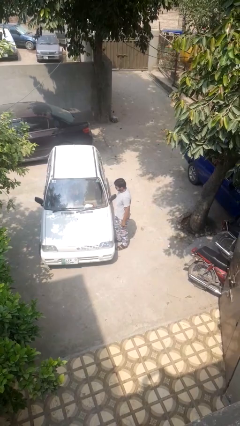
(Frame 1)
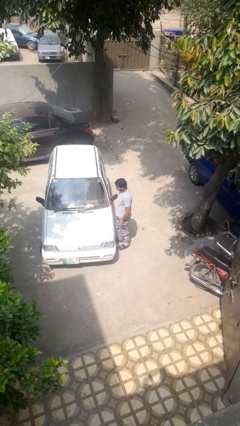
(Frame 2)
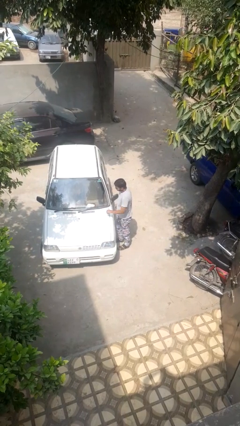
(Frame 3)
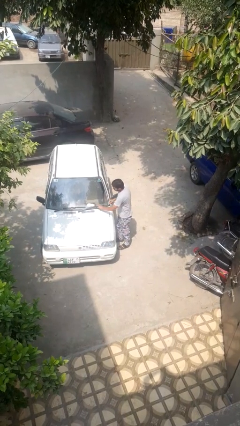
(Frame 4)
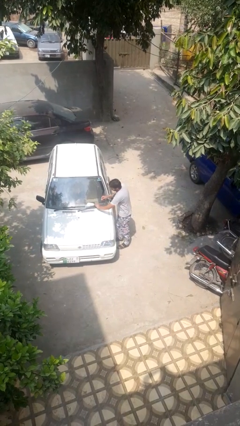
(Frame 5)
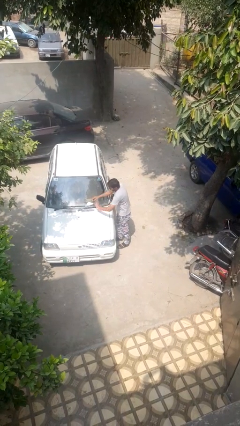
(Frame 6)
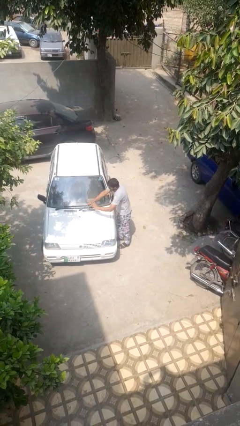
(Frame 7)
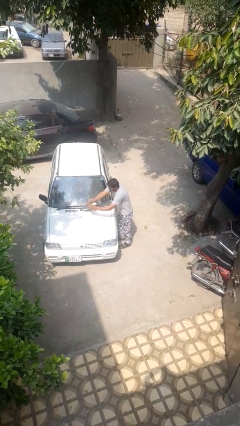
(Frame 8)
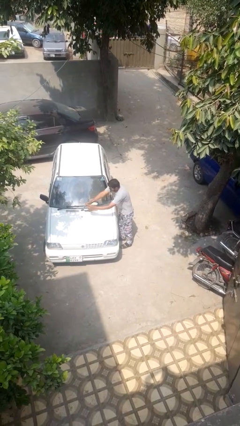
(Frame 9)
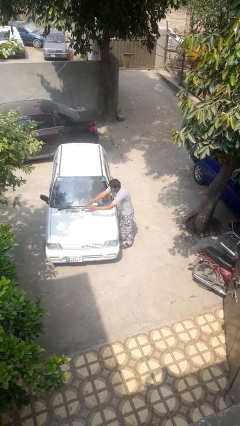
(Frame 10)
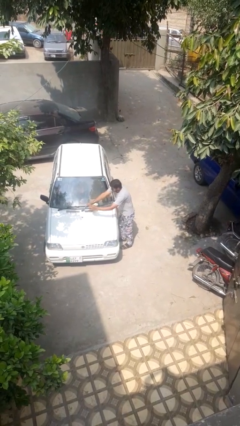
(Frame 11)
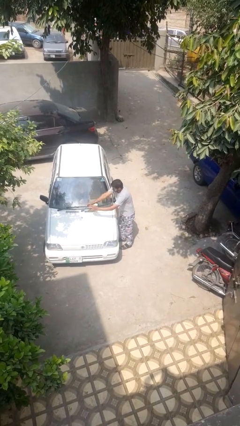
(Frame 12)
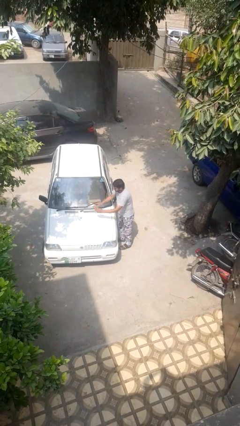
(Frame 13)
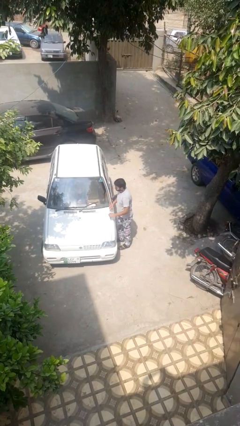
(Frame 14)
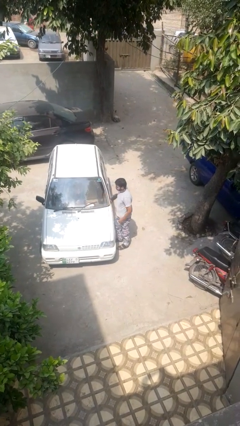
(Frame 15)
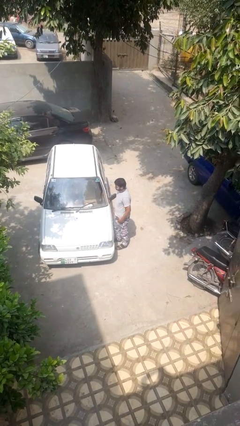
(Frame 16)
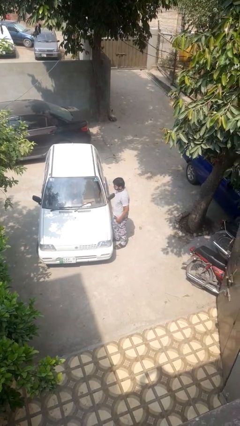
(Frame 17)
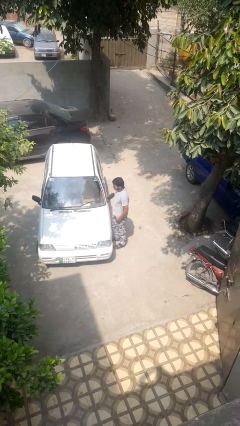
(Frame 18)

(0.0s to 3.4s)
person flips up car wipers

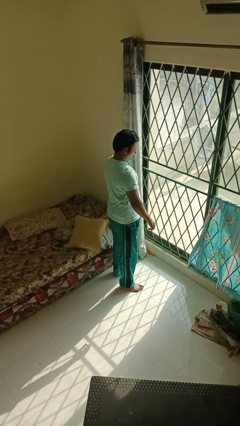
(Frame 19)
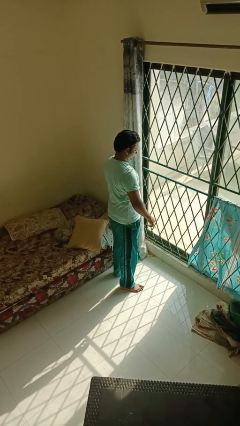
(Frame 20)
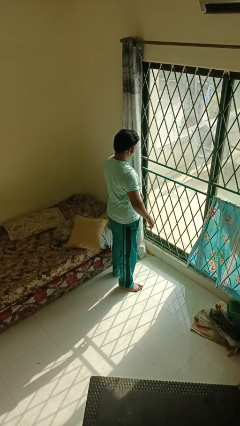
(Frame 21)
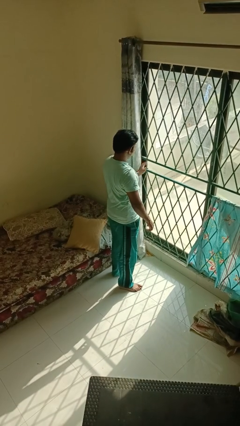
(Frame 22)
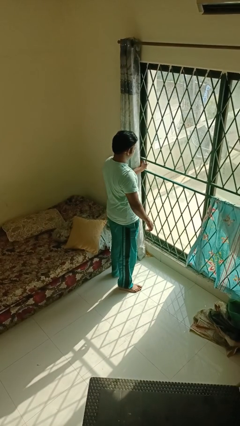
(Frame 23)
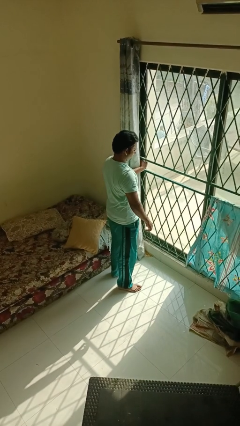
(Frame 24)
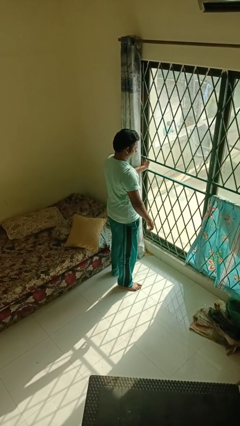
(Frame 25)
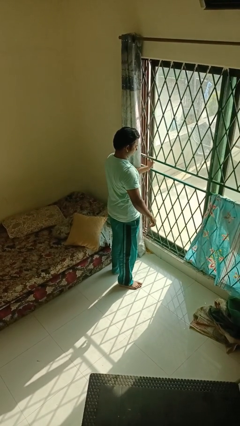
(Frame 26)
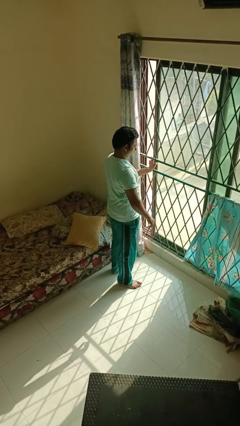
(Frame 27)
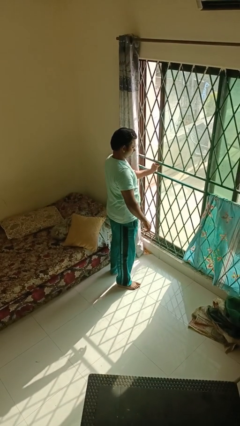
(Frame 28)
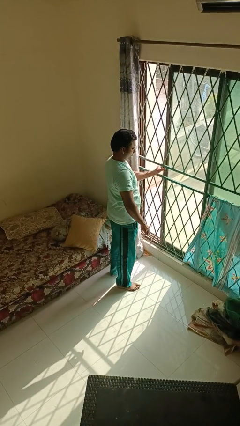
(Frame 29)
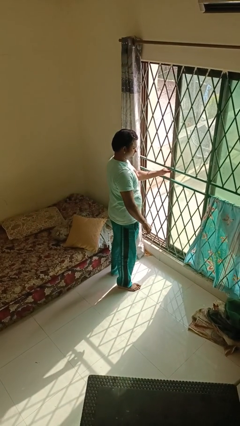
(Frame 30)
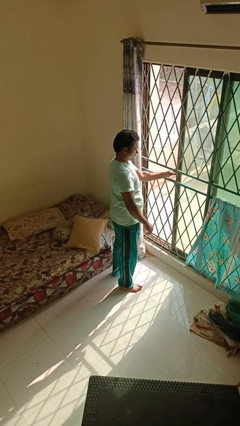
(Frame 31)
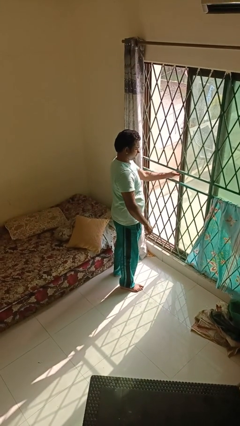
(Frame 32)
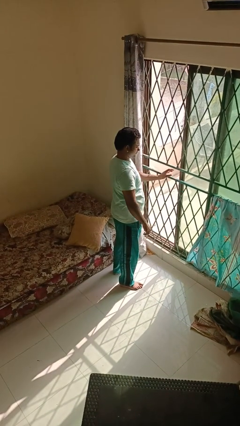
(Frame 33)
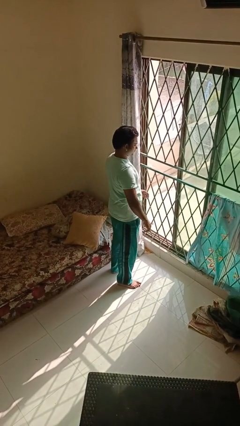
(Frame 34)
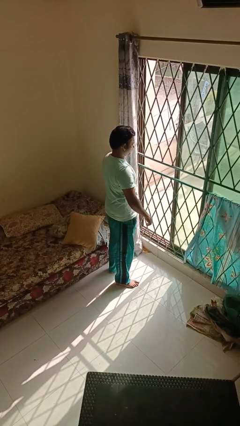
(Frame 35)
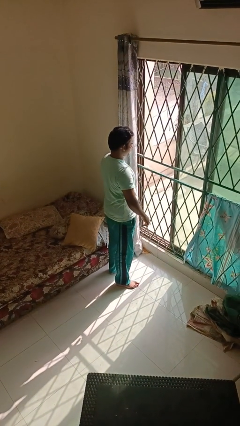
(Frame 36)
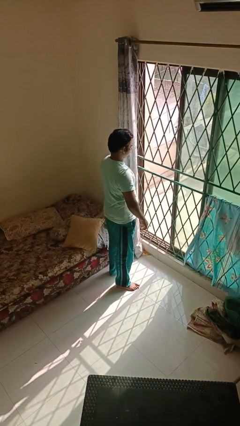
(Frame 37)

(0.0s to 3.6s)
person opens home window

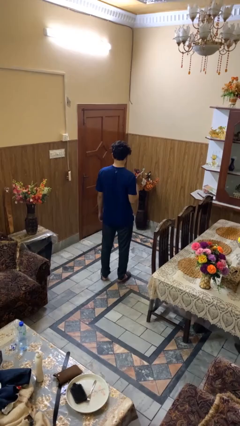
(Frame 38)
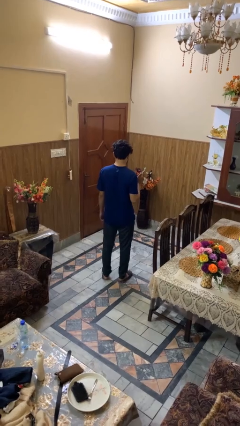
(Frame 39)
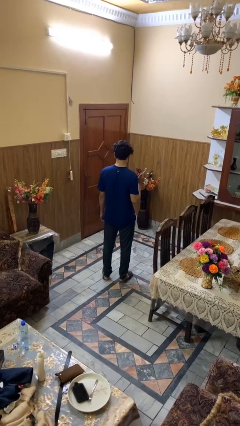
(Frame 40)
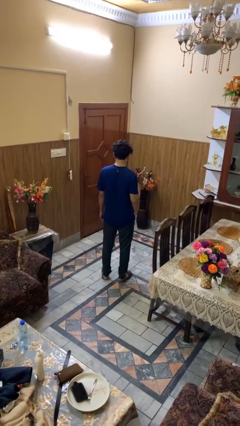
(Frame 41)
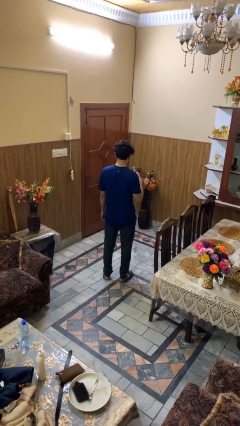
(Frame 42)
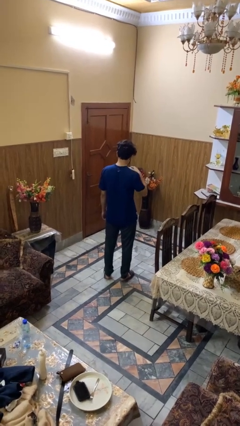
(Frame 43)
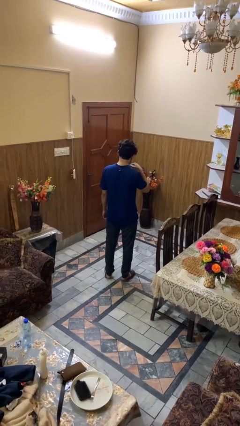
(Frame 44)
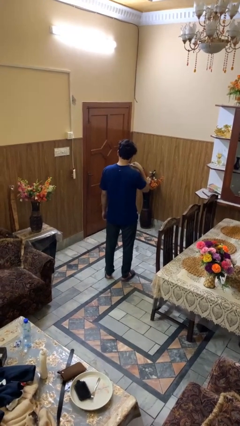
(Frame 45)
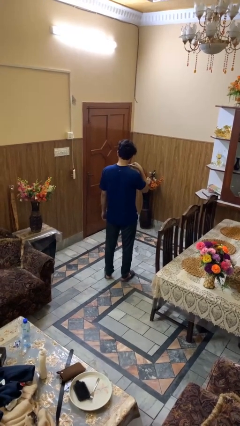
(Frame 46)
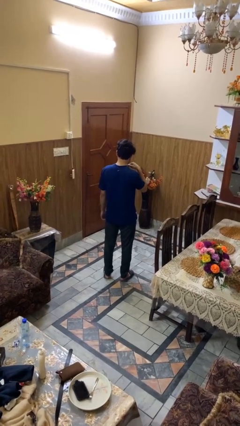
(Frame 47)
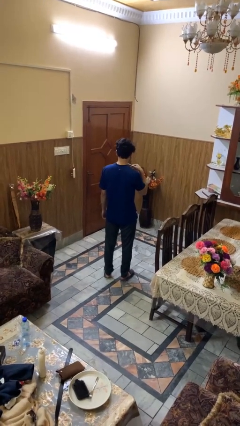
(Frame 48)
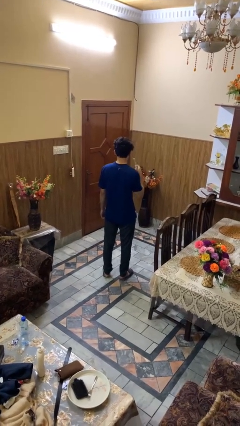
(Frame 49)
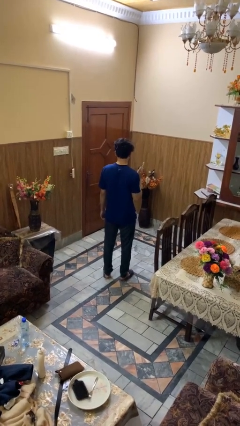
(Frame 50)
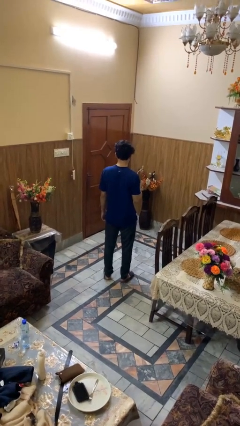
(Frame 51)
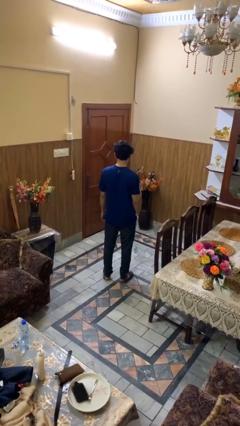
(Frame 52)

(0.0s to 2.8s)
person brushes teeth

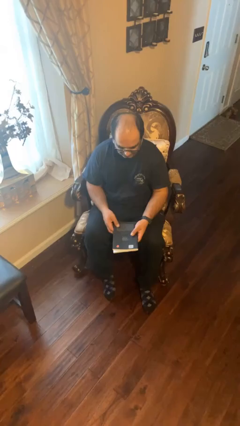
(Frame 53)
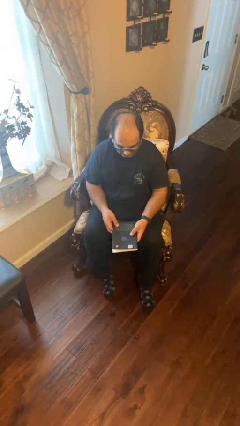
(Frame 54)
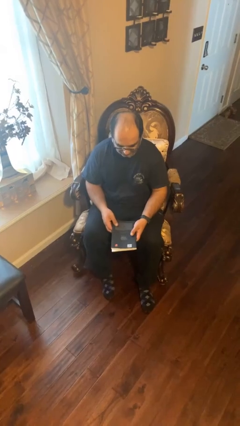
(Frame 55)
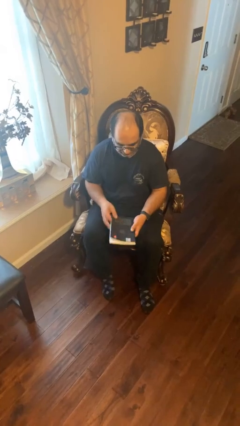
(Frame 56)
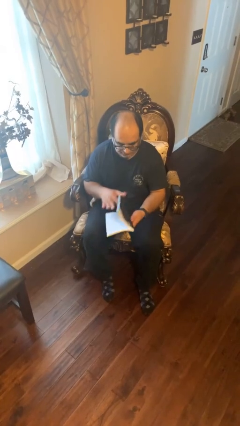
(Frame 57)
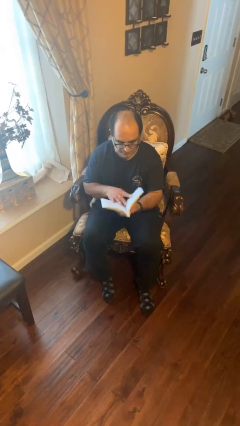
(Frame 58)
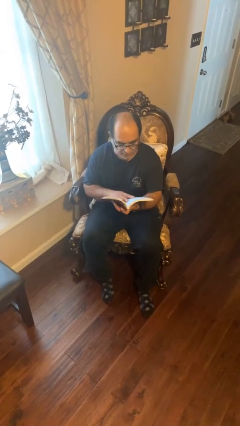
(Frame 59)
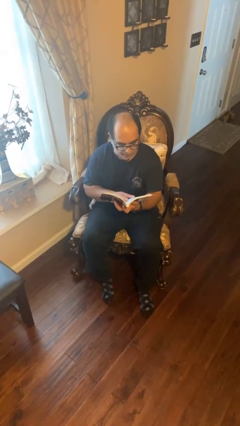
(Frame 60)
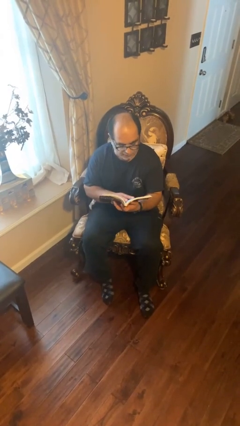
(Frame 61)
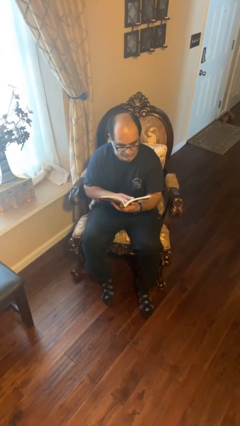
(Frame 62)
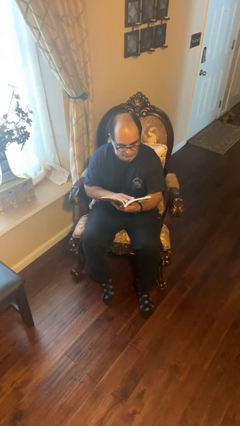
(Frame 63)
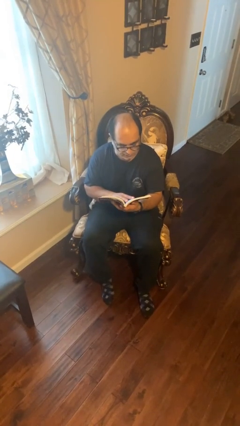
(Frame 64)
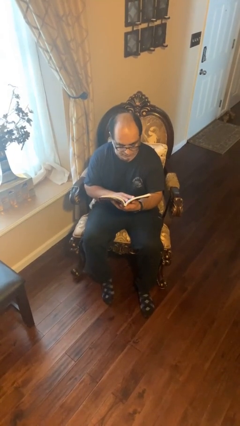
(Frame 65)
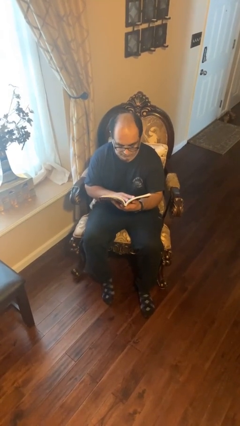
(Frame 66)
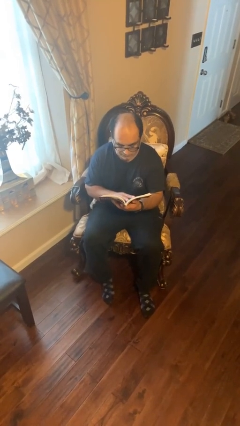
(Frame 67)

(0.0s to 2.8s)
person reads document

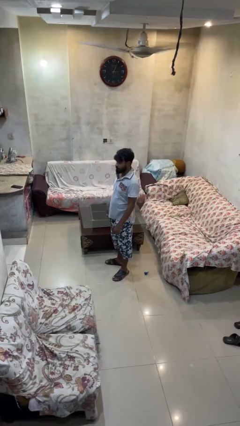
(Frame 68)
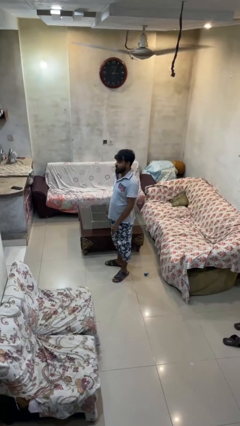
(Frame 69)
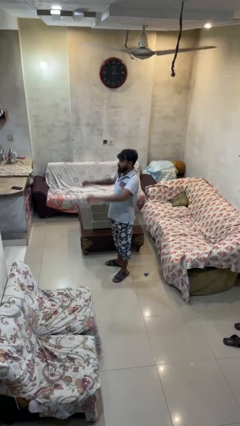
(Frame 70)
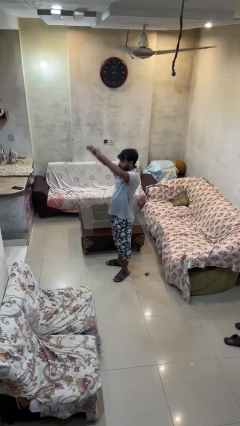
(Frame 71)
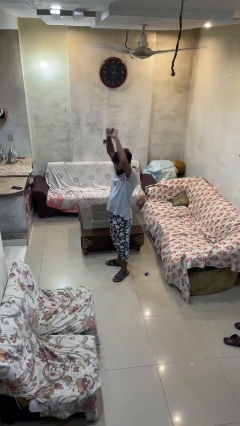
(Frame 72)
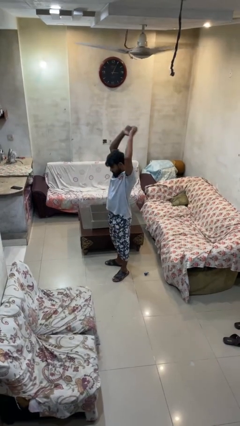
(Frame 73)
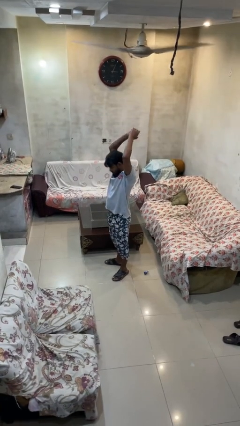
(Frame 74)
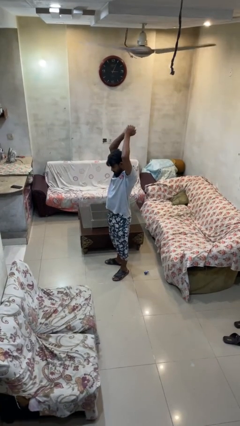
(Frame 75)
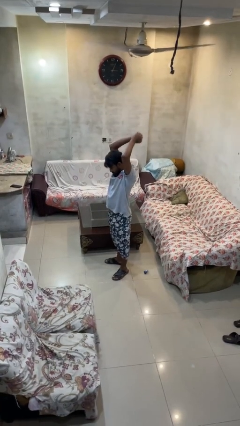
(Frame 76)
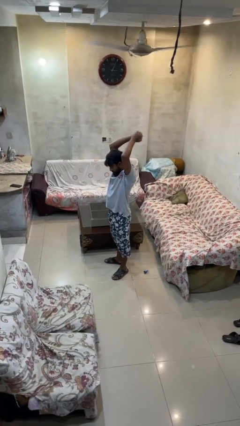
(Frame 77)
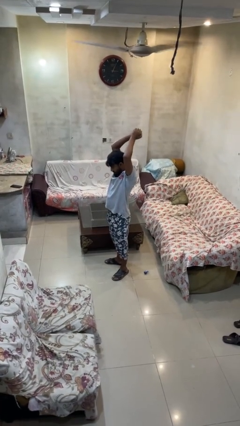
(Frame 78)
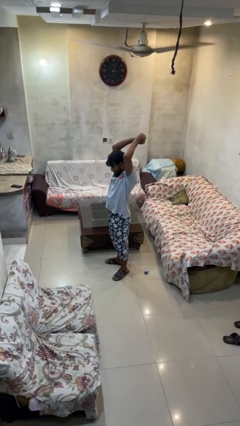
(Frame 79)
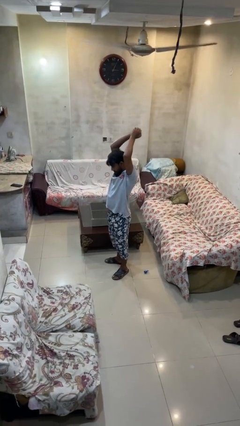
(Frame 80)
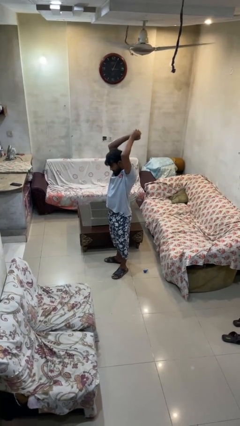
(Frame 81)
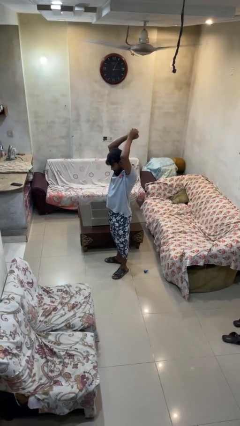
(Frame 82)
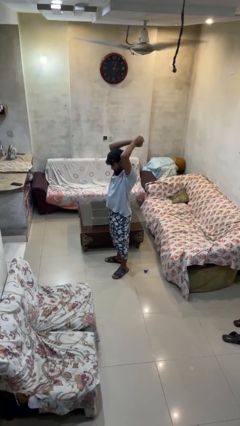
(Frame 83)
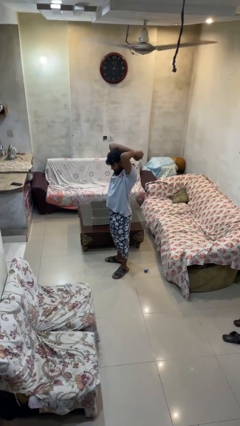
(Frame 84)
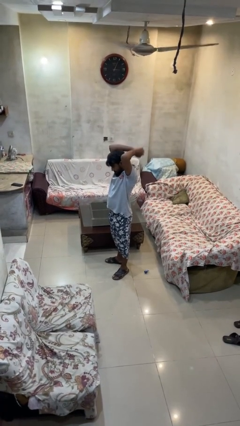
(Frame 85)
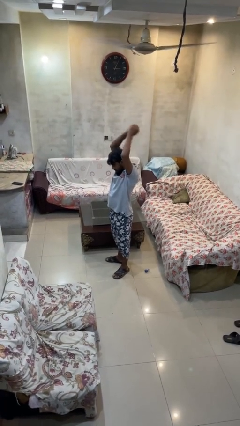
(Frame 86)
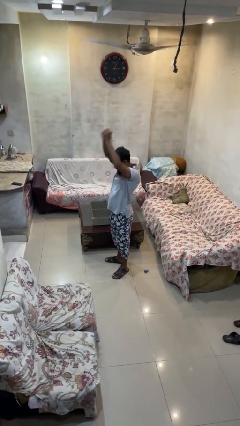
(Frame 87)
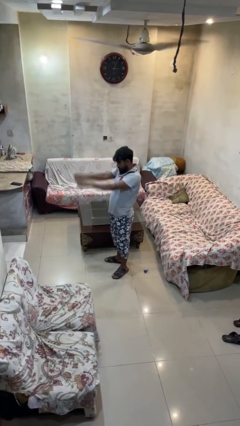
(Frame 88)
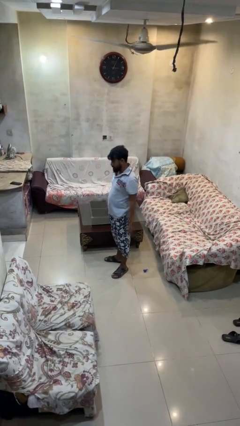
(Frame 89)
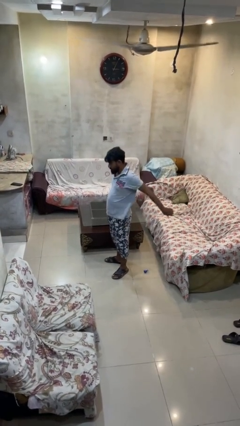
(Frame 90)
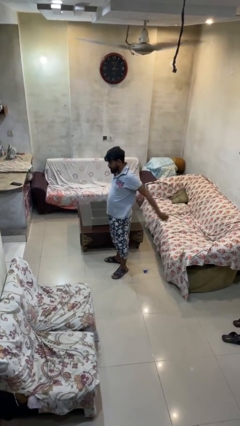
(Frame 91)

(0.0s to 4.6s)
person stretches arms over head
